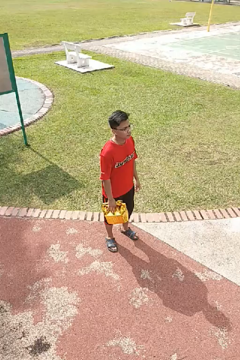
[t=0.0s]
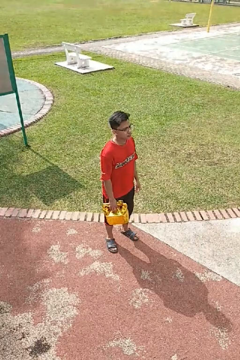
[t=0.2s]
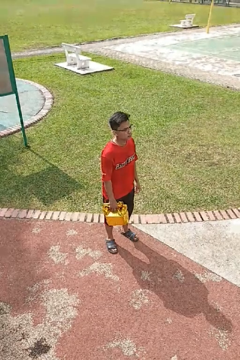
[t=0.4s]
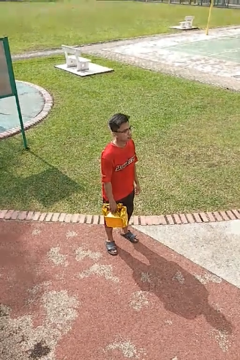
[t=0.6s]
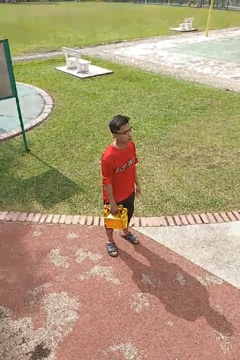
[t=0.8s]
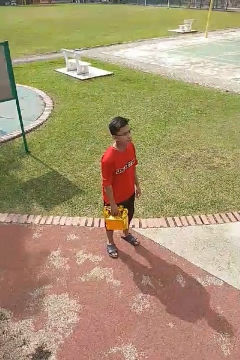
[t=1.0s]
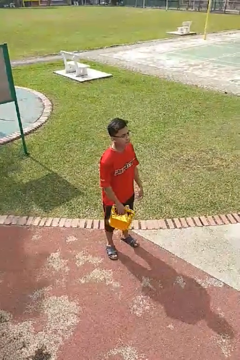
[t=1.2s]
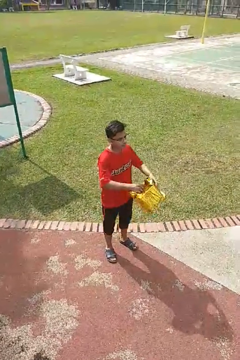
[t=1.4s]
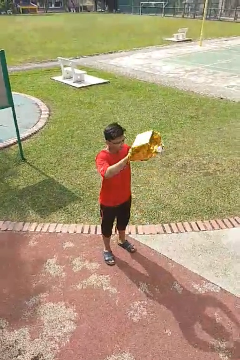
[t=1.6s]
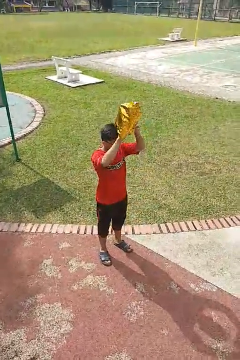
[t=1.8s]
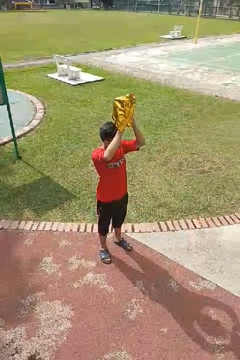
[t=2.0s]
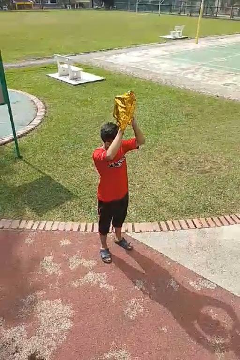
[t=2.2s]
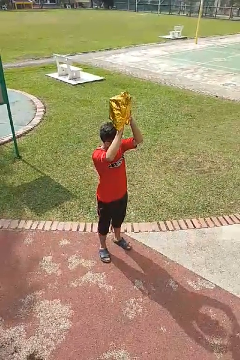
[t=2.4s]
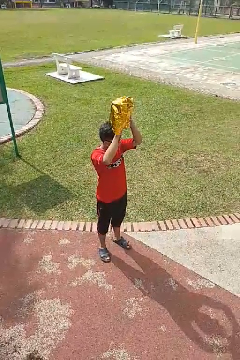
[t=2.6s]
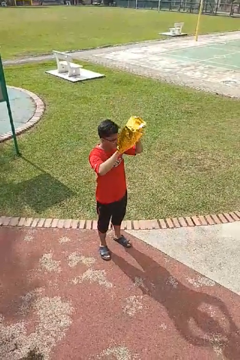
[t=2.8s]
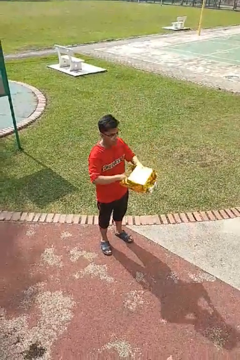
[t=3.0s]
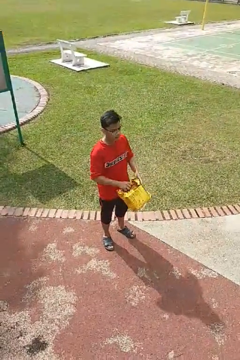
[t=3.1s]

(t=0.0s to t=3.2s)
person holds object above head

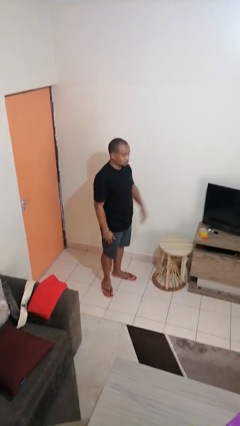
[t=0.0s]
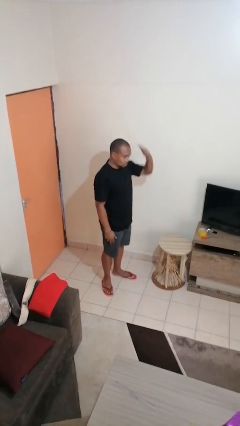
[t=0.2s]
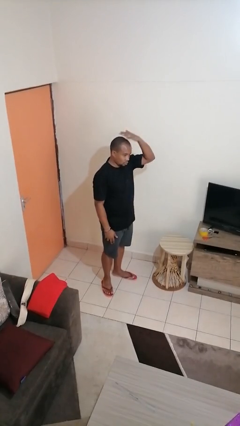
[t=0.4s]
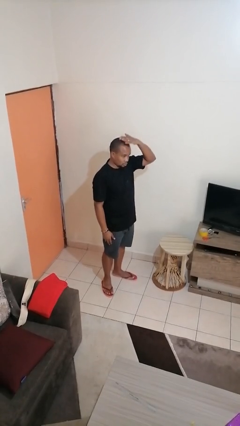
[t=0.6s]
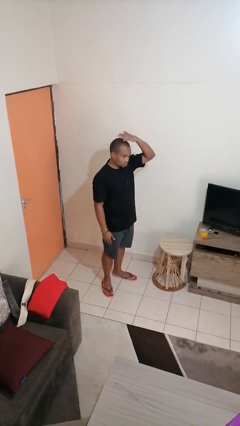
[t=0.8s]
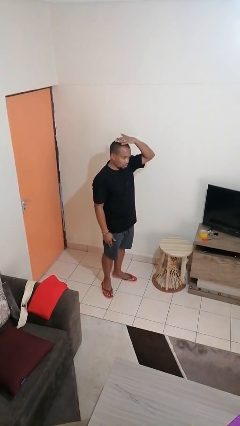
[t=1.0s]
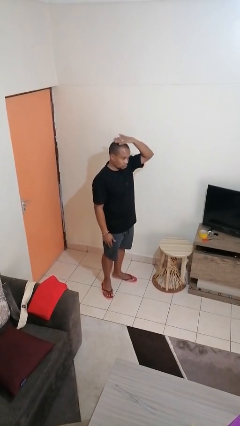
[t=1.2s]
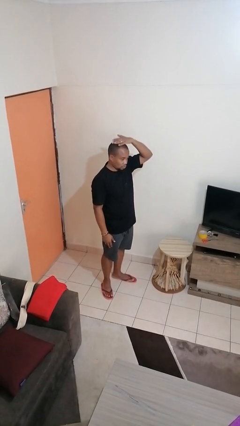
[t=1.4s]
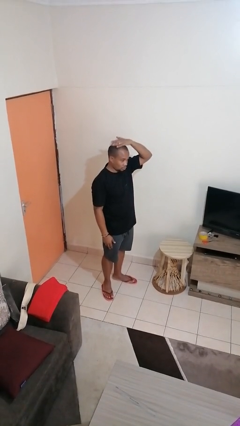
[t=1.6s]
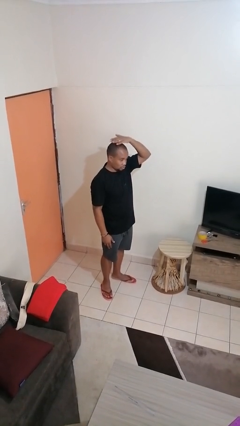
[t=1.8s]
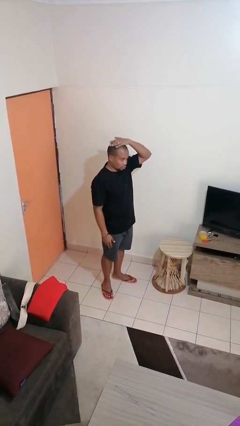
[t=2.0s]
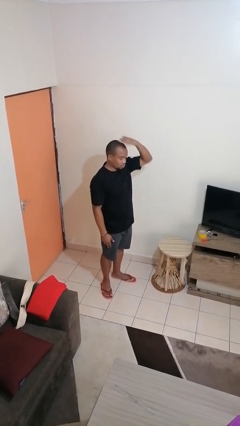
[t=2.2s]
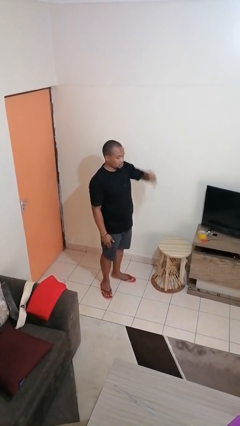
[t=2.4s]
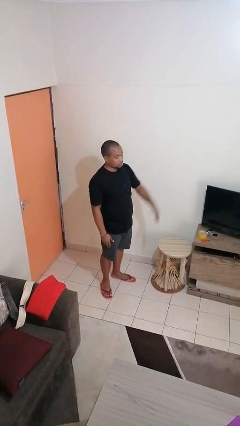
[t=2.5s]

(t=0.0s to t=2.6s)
person pats head

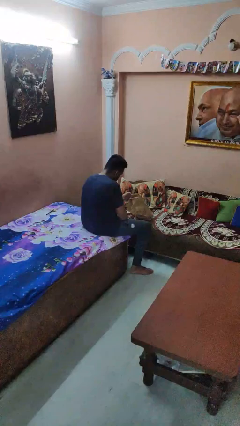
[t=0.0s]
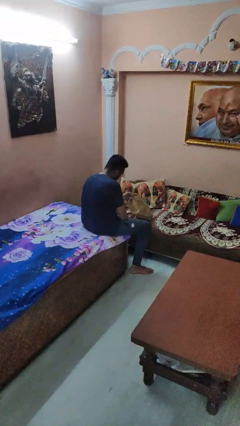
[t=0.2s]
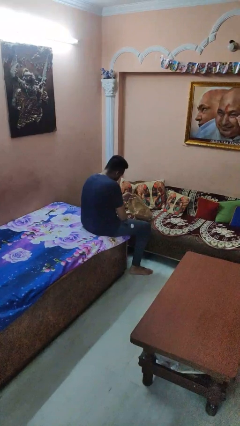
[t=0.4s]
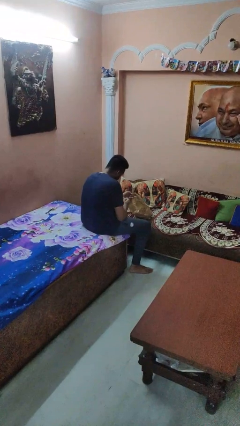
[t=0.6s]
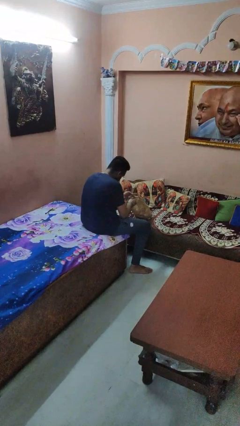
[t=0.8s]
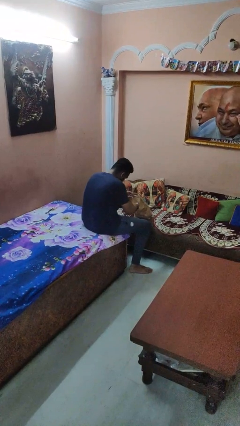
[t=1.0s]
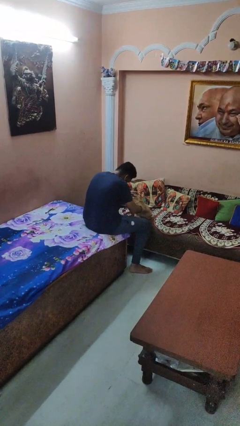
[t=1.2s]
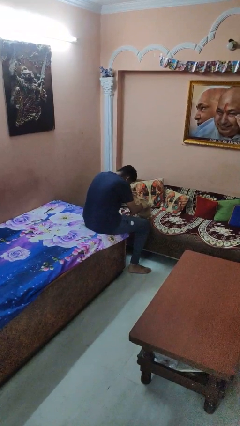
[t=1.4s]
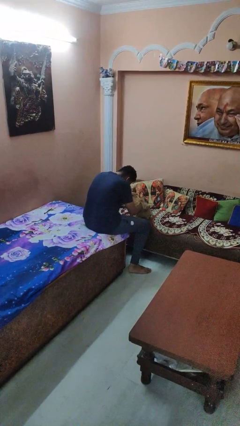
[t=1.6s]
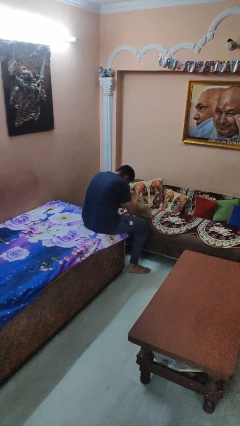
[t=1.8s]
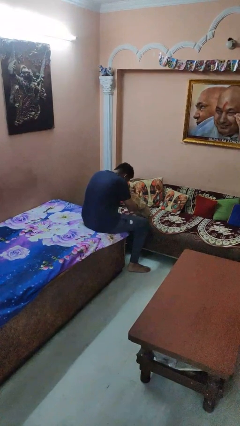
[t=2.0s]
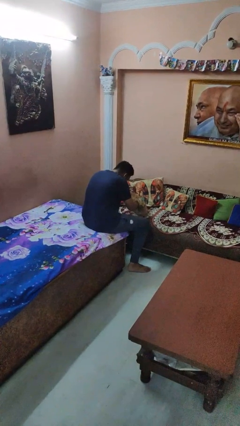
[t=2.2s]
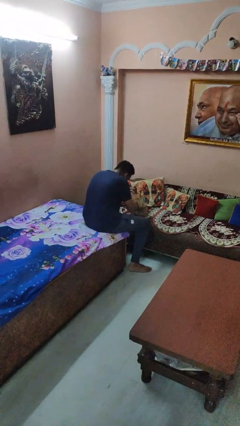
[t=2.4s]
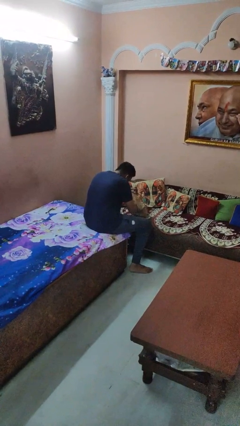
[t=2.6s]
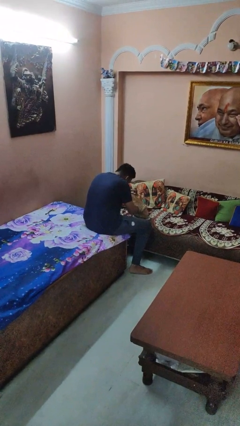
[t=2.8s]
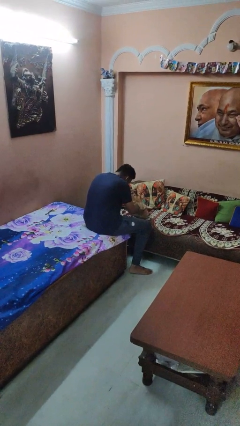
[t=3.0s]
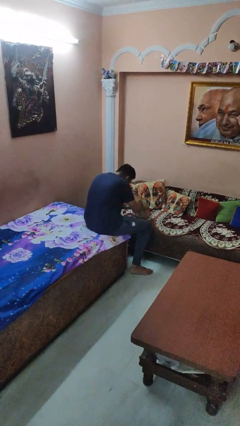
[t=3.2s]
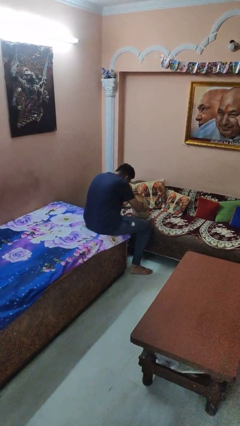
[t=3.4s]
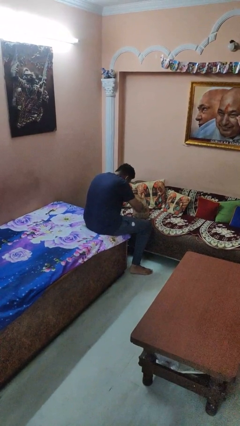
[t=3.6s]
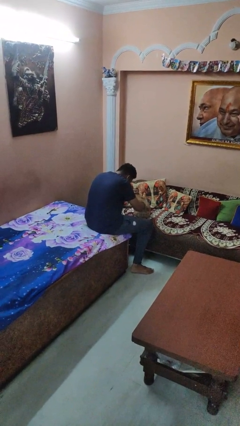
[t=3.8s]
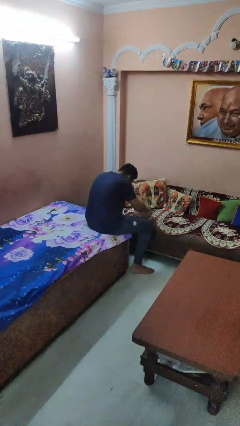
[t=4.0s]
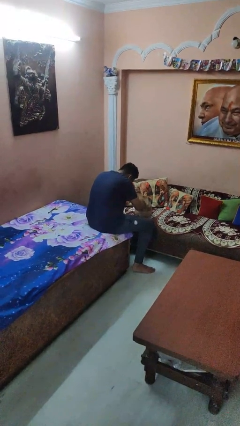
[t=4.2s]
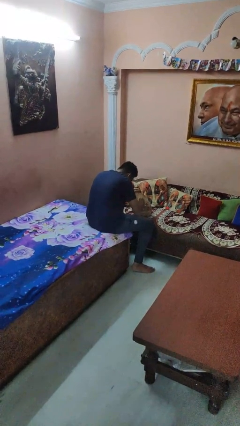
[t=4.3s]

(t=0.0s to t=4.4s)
person searches in bag

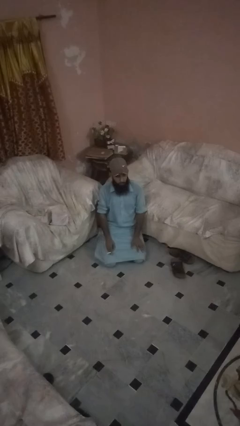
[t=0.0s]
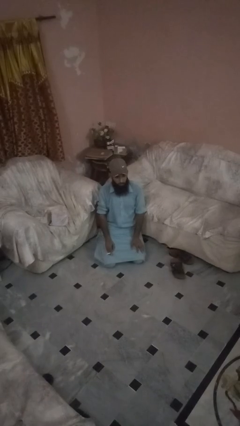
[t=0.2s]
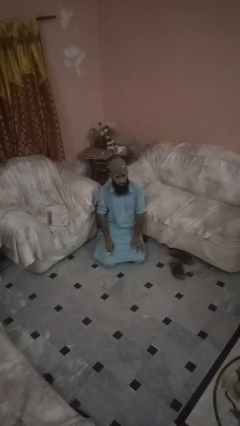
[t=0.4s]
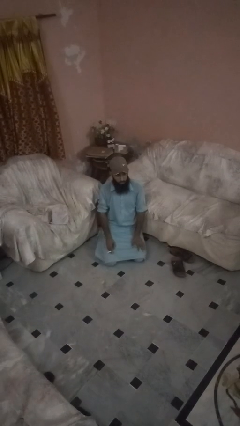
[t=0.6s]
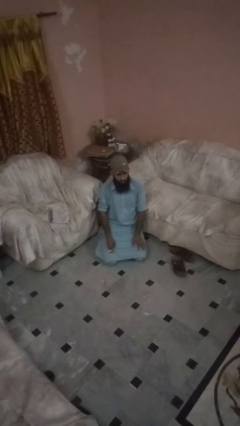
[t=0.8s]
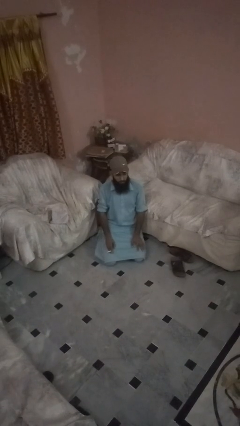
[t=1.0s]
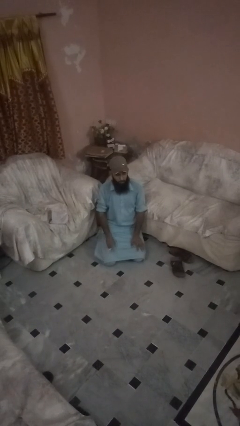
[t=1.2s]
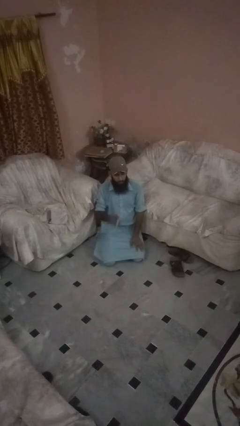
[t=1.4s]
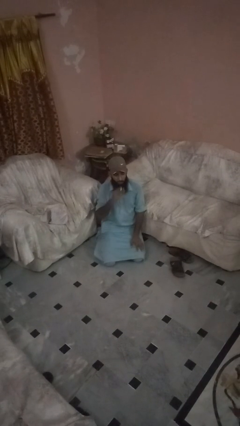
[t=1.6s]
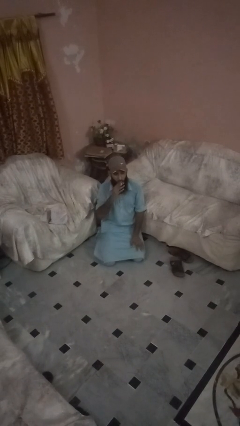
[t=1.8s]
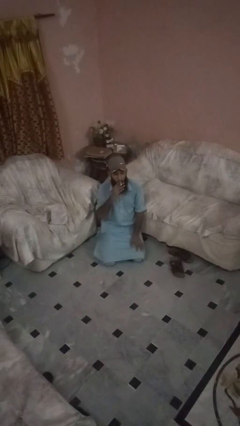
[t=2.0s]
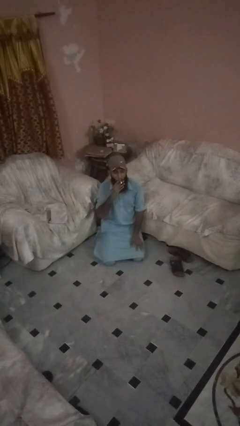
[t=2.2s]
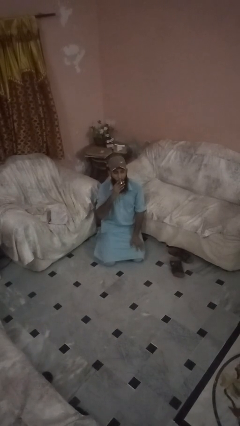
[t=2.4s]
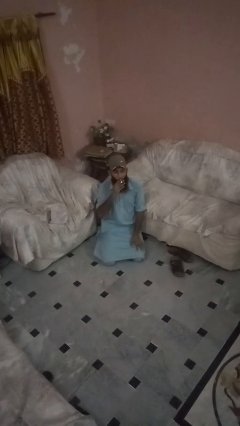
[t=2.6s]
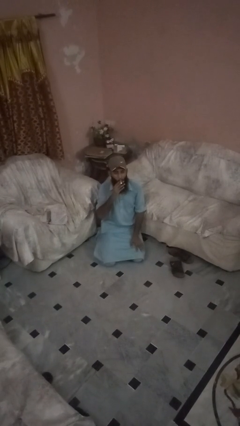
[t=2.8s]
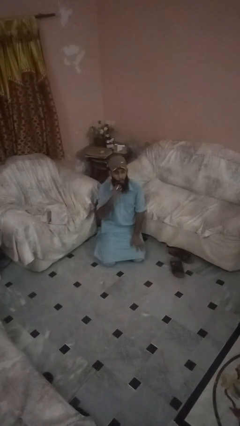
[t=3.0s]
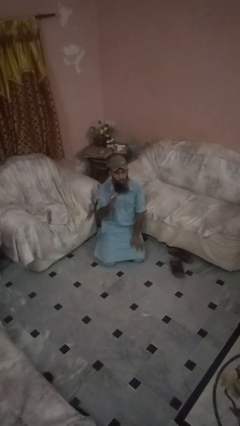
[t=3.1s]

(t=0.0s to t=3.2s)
person vapes

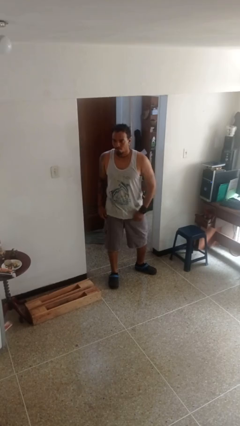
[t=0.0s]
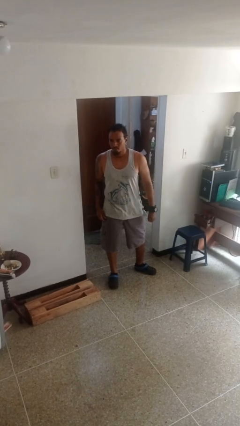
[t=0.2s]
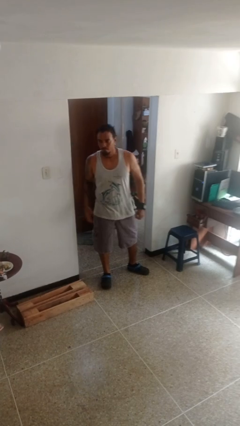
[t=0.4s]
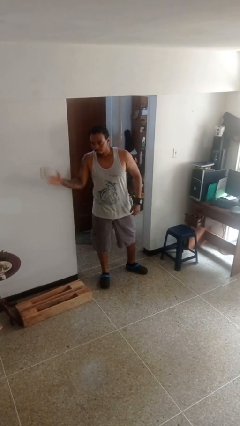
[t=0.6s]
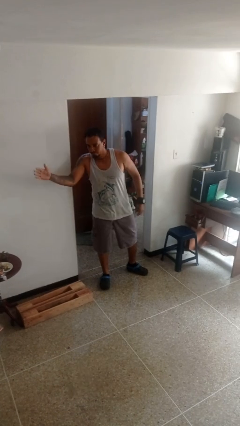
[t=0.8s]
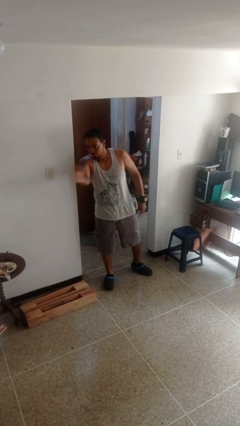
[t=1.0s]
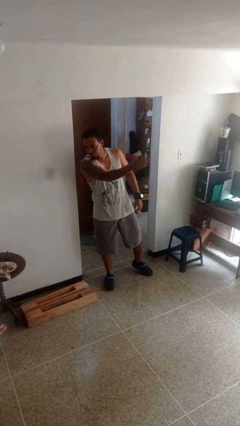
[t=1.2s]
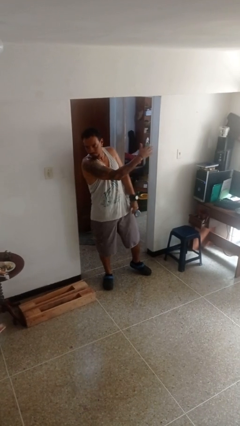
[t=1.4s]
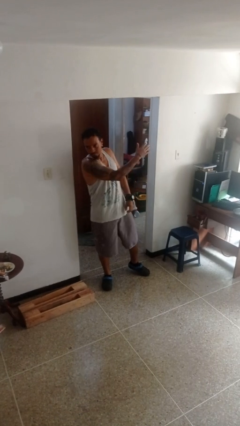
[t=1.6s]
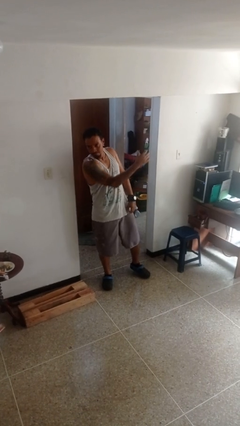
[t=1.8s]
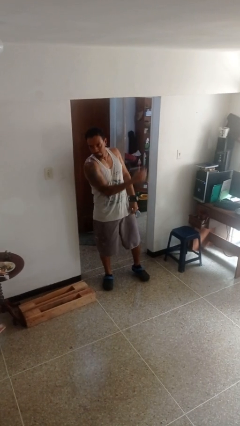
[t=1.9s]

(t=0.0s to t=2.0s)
person gestures swipe left

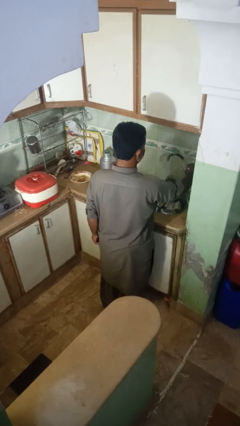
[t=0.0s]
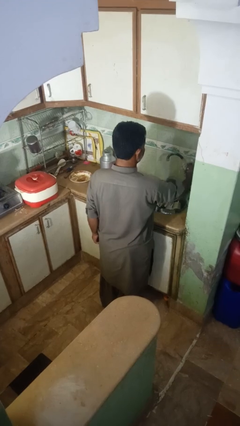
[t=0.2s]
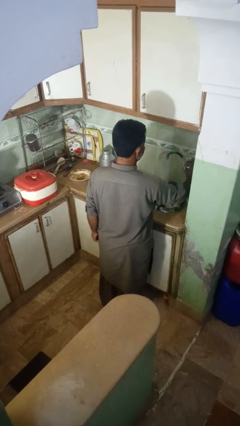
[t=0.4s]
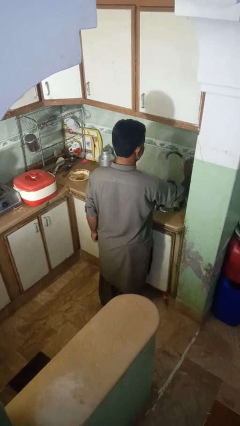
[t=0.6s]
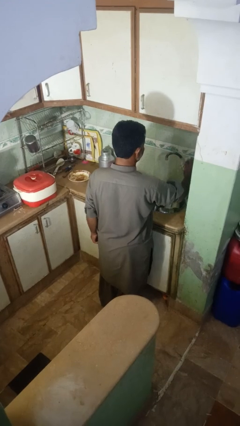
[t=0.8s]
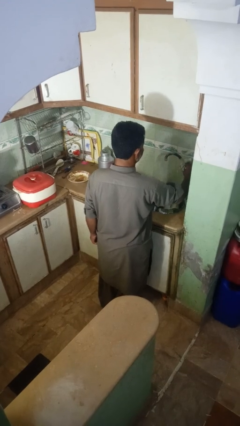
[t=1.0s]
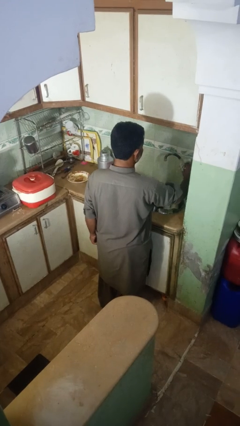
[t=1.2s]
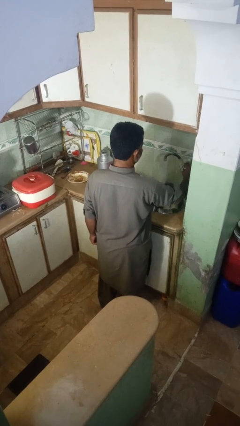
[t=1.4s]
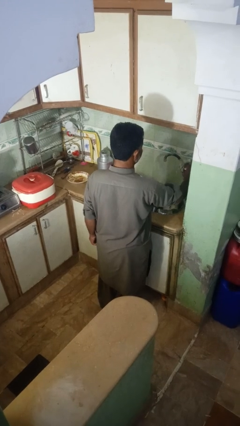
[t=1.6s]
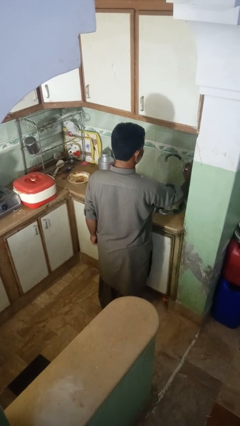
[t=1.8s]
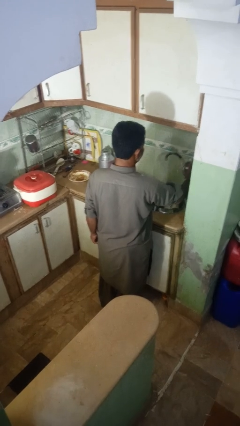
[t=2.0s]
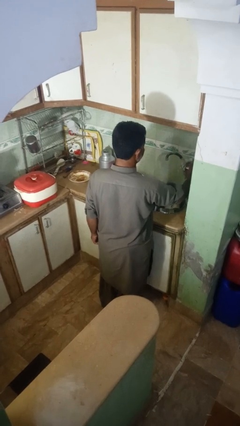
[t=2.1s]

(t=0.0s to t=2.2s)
person turns on faucet

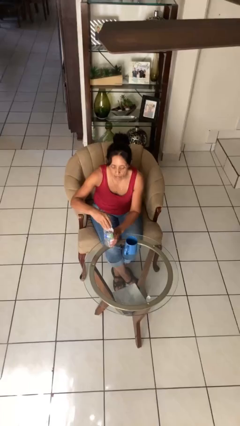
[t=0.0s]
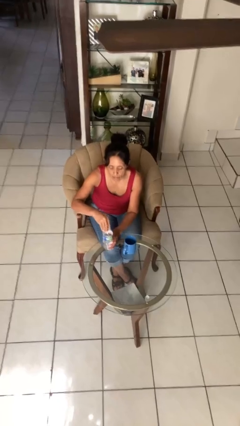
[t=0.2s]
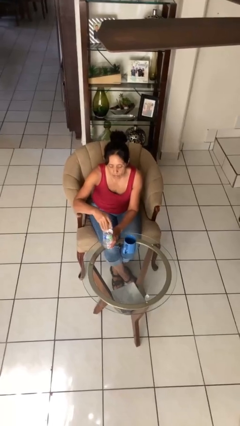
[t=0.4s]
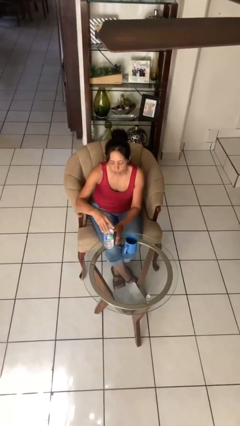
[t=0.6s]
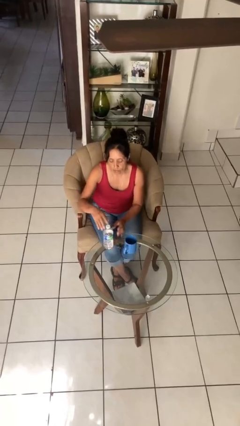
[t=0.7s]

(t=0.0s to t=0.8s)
person screws lid to bottle
